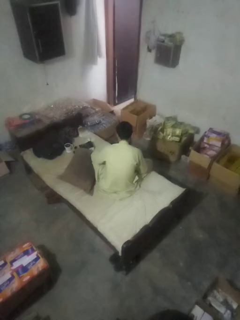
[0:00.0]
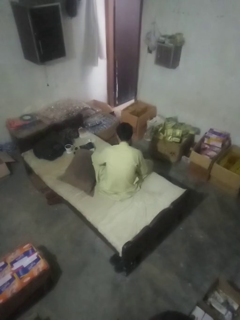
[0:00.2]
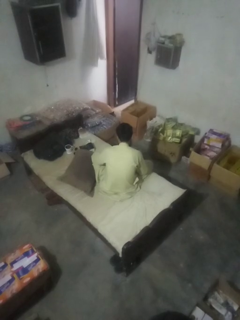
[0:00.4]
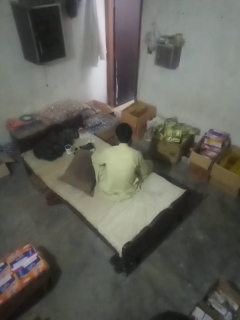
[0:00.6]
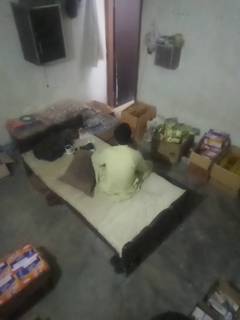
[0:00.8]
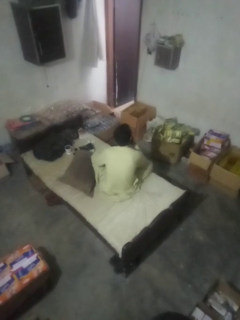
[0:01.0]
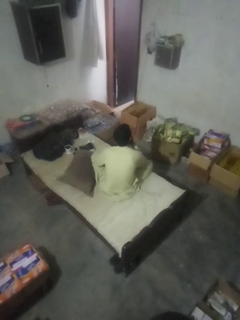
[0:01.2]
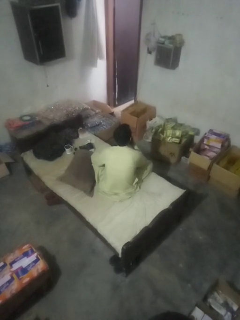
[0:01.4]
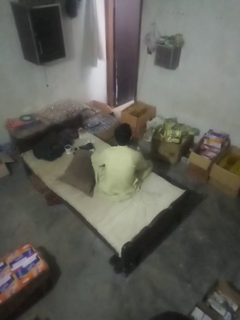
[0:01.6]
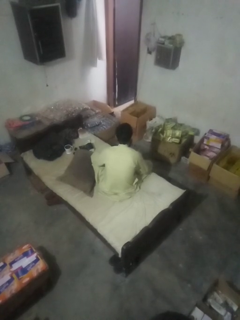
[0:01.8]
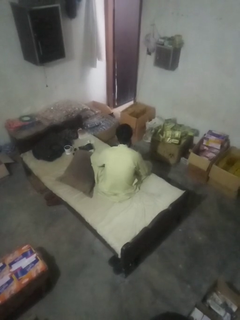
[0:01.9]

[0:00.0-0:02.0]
person gestures be quiet

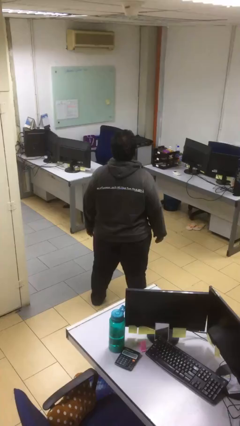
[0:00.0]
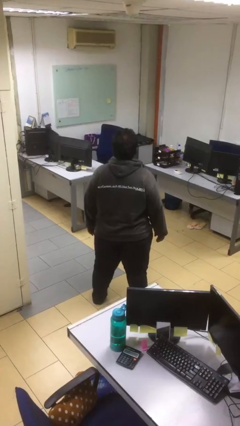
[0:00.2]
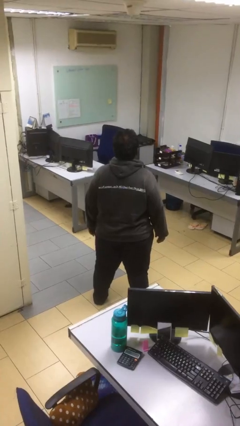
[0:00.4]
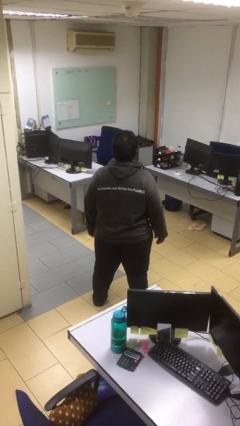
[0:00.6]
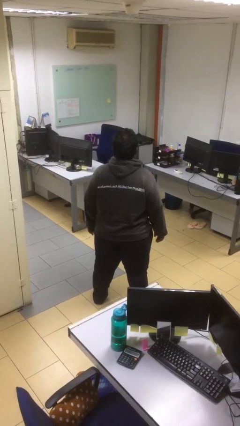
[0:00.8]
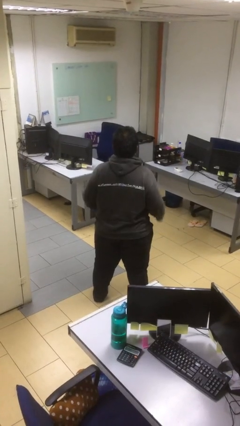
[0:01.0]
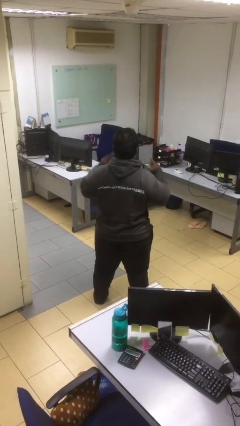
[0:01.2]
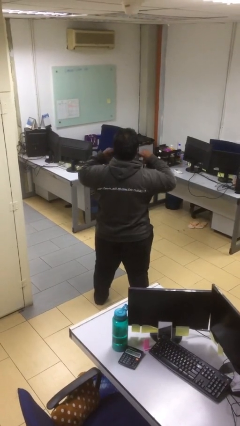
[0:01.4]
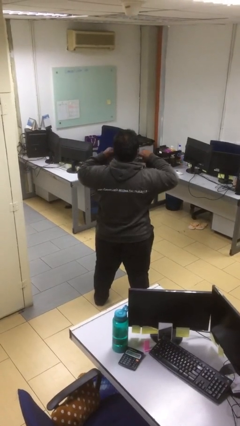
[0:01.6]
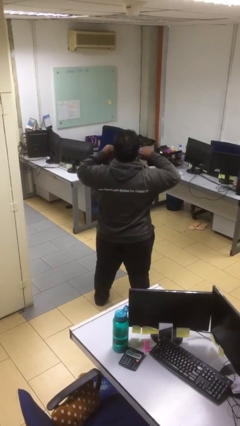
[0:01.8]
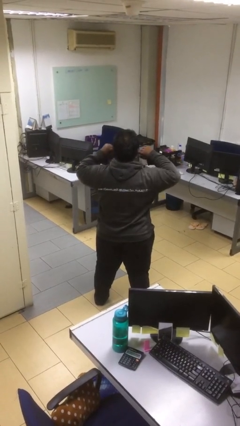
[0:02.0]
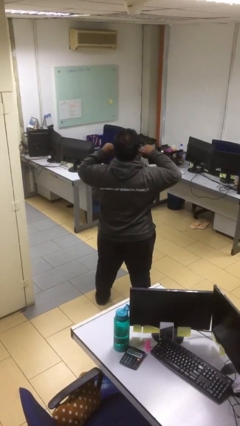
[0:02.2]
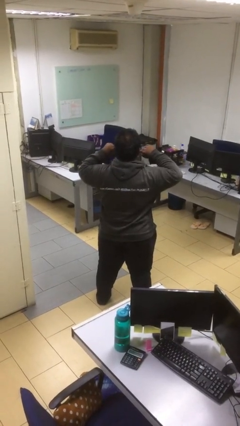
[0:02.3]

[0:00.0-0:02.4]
person puts fingers in ear

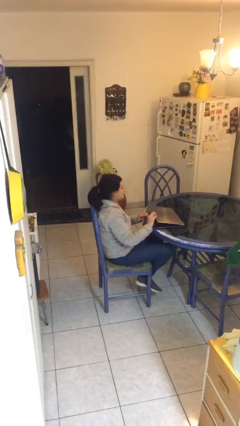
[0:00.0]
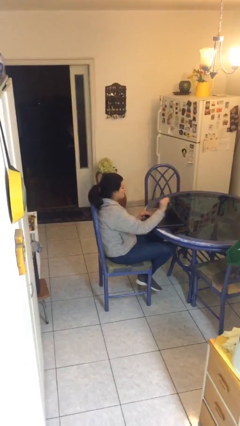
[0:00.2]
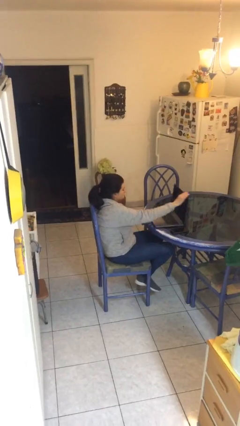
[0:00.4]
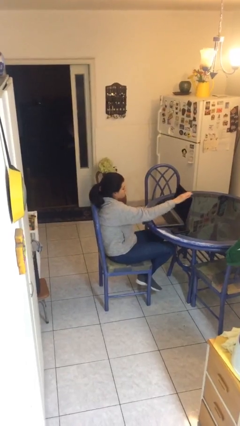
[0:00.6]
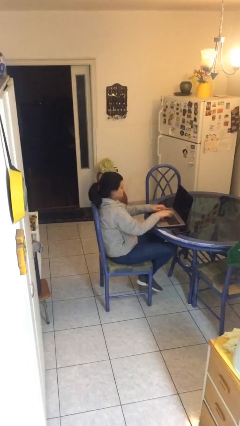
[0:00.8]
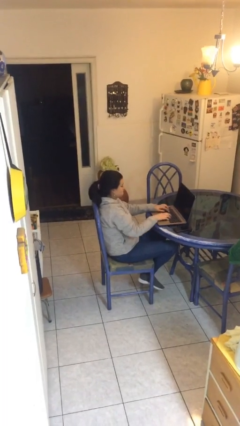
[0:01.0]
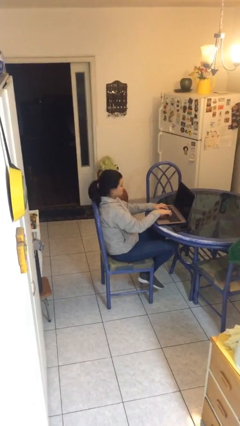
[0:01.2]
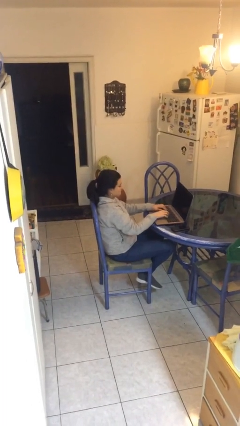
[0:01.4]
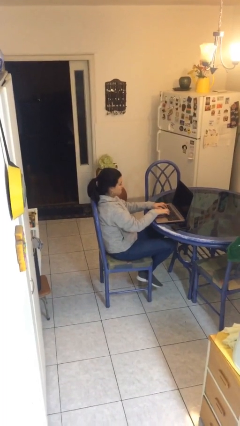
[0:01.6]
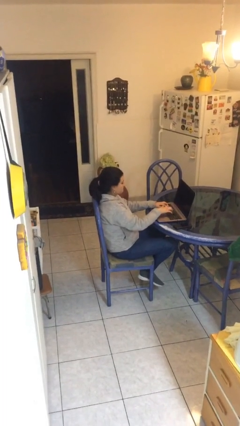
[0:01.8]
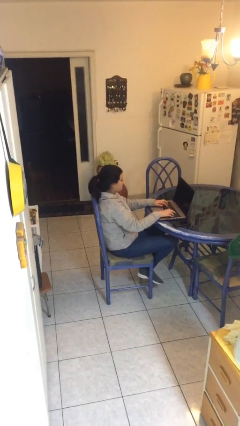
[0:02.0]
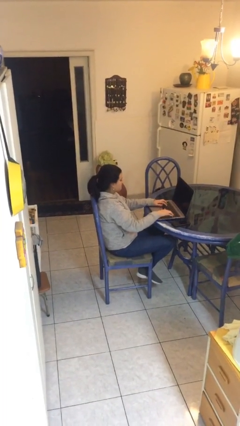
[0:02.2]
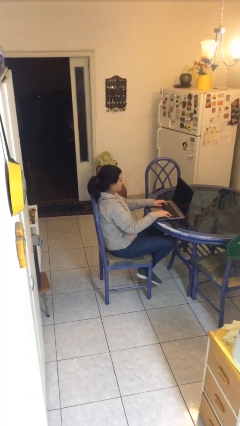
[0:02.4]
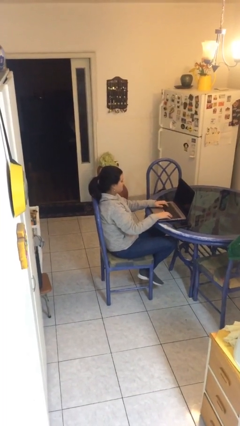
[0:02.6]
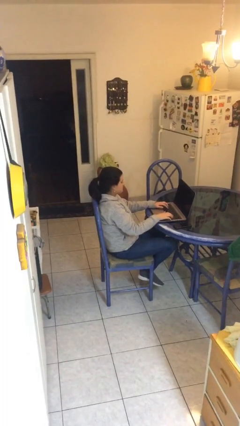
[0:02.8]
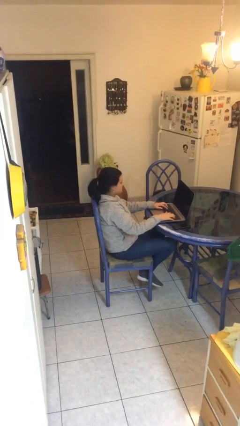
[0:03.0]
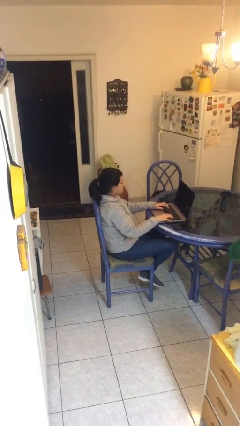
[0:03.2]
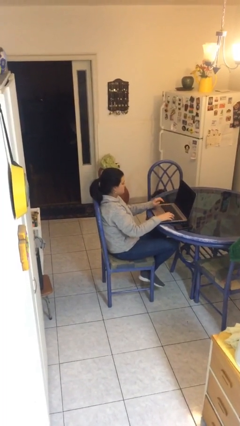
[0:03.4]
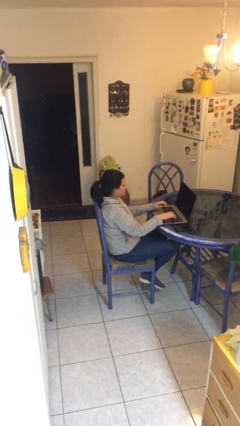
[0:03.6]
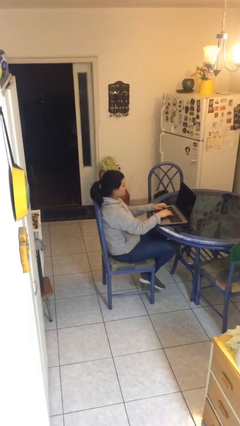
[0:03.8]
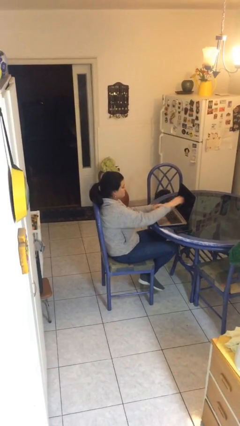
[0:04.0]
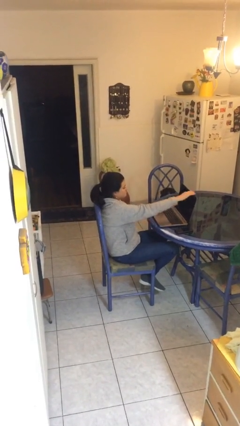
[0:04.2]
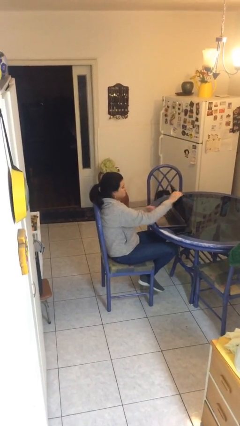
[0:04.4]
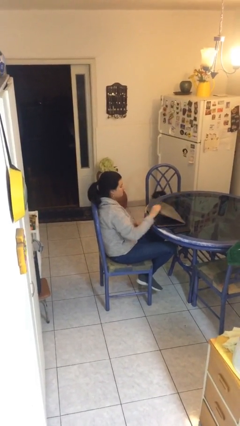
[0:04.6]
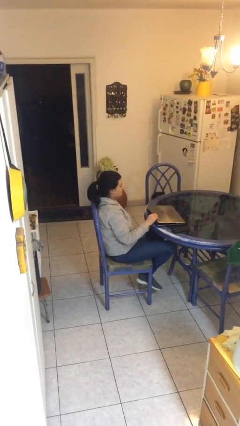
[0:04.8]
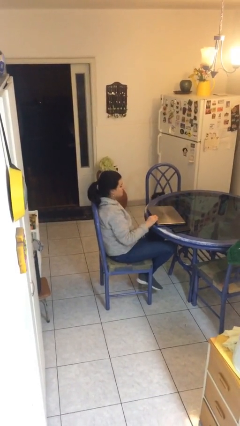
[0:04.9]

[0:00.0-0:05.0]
person interacts with laptop

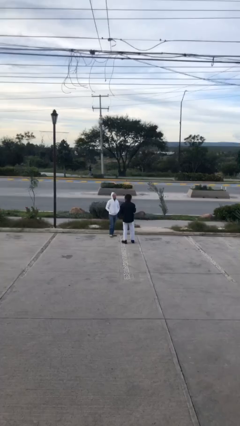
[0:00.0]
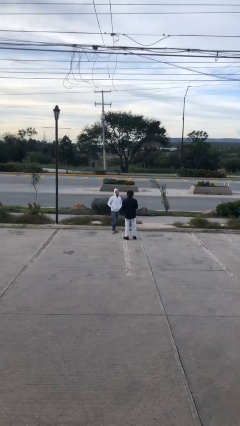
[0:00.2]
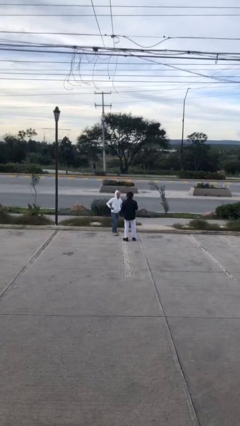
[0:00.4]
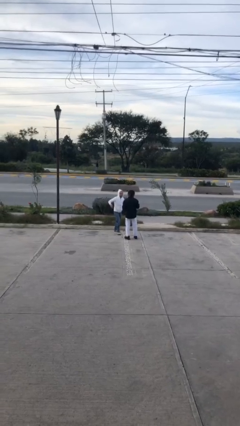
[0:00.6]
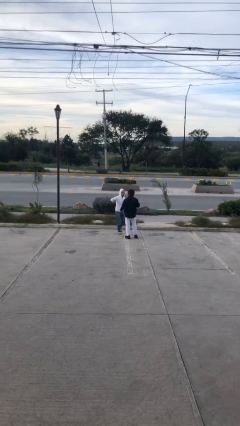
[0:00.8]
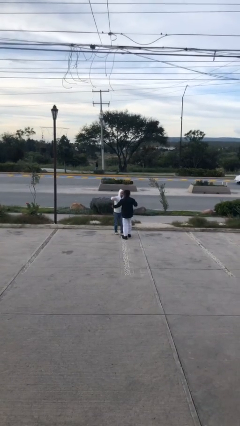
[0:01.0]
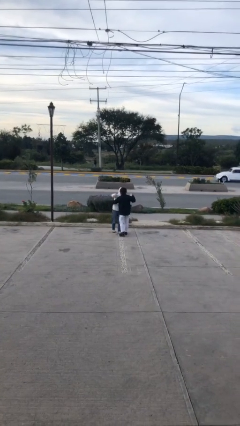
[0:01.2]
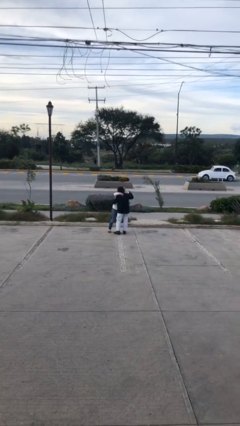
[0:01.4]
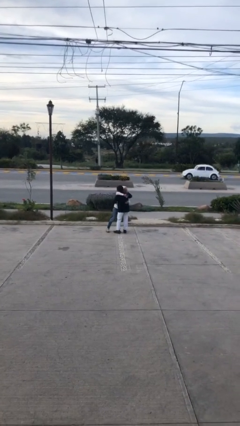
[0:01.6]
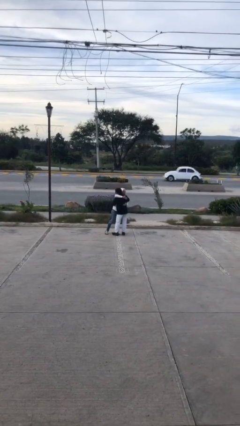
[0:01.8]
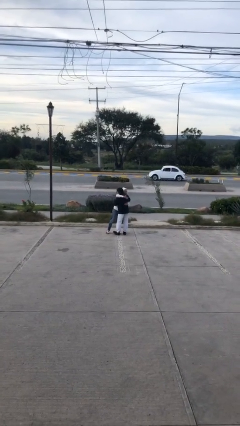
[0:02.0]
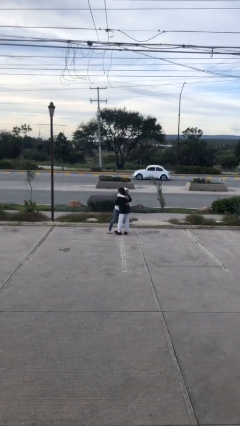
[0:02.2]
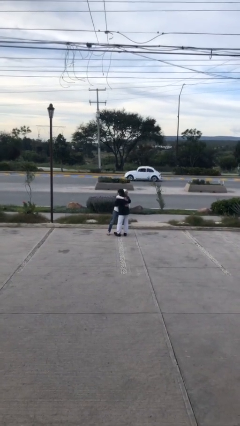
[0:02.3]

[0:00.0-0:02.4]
person embraces person

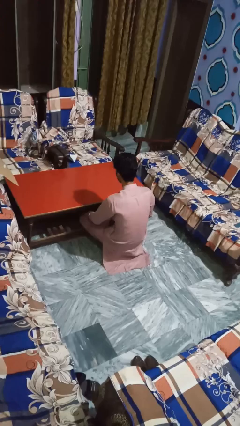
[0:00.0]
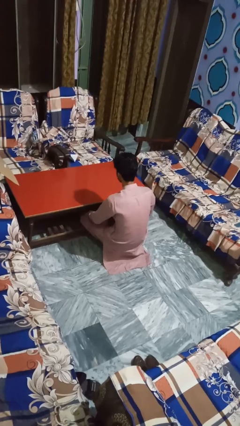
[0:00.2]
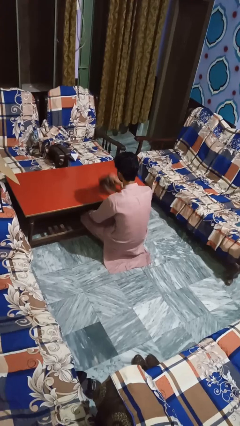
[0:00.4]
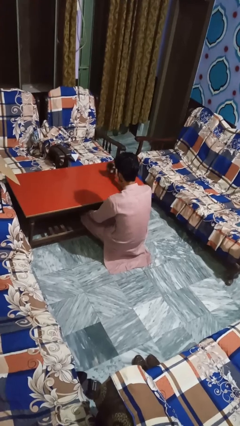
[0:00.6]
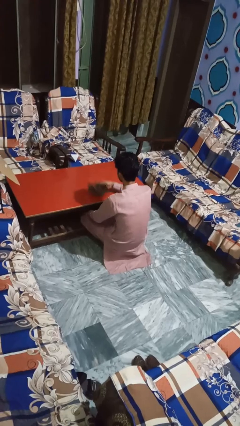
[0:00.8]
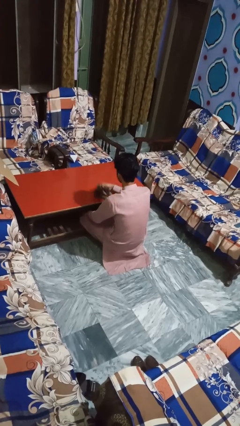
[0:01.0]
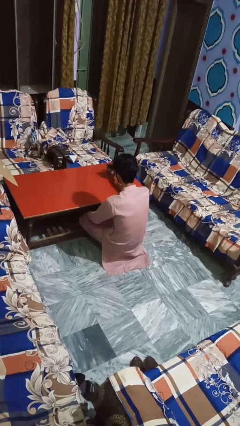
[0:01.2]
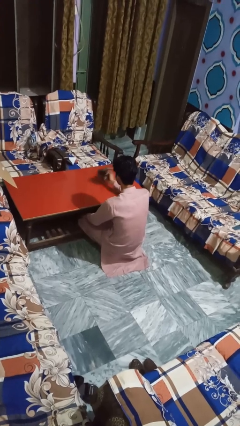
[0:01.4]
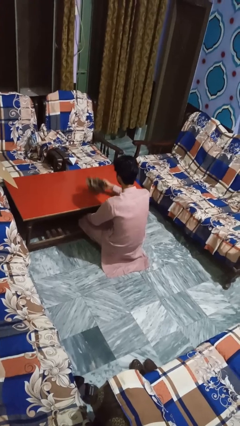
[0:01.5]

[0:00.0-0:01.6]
person cleans table with rag

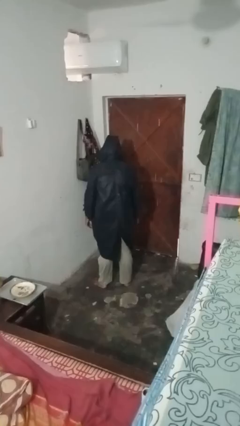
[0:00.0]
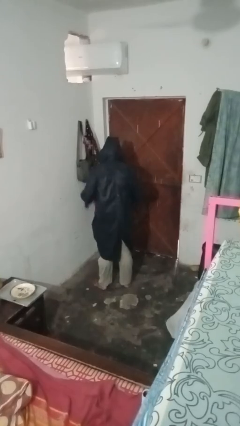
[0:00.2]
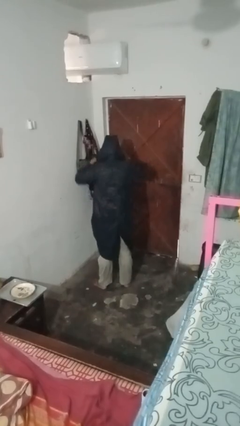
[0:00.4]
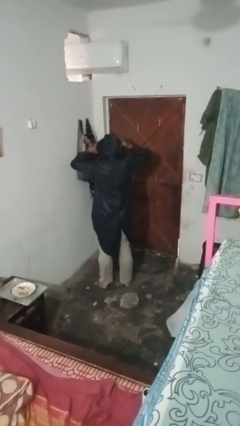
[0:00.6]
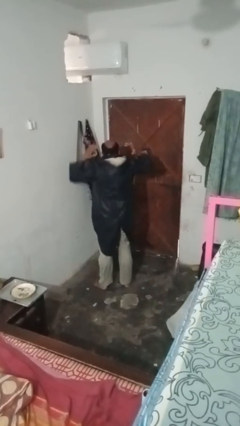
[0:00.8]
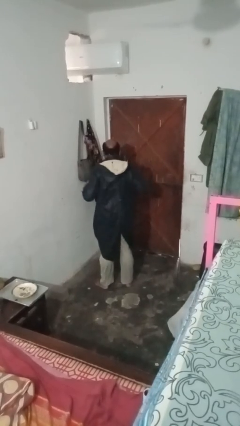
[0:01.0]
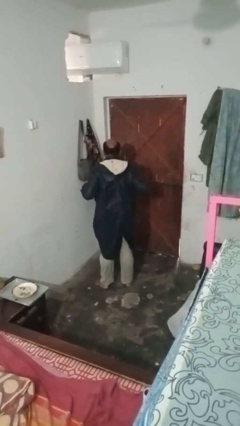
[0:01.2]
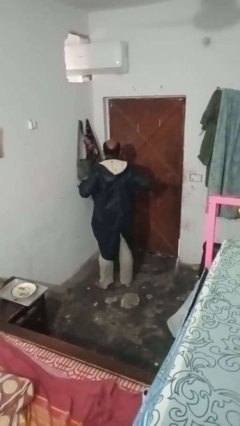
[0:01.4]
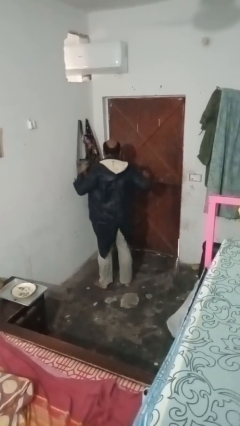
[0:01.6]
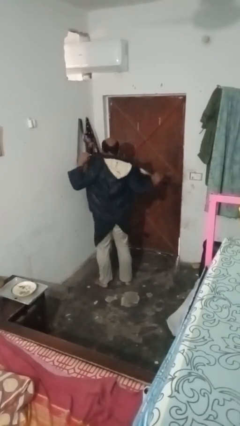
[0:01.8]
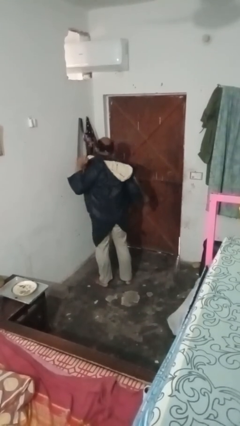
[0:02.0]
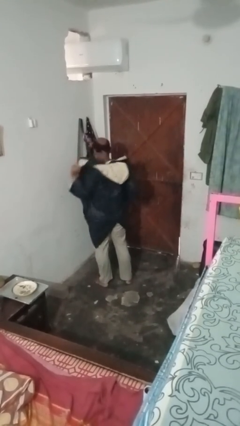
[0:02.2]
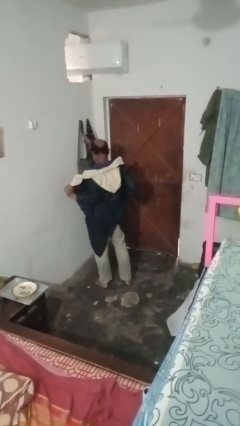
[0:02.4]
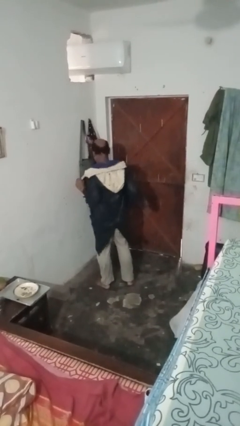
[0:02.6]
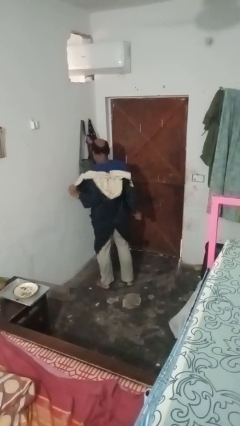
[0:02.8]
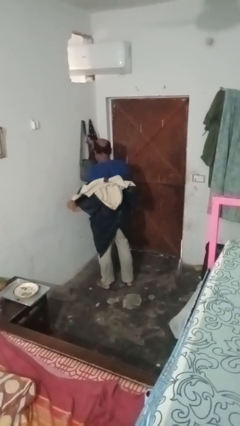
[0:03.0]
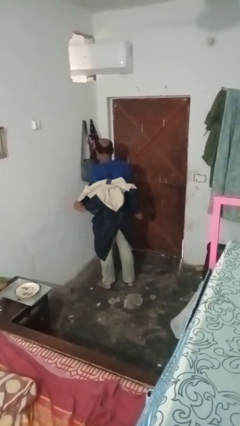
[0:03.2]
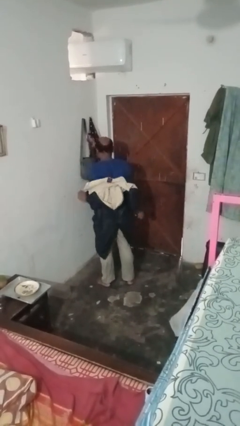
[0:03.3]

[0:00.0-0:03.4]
person takes off hoodie

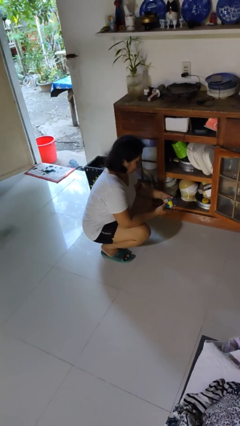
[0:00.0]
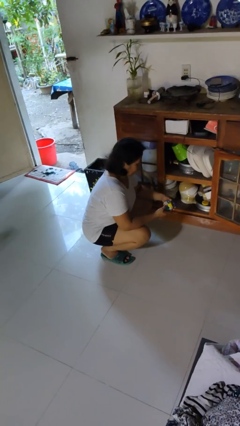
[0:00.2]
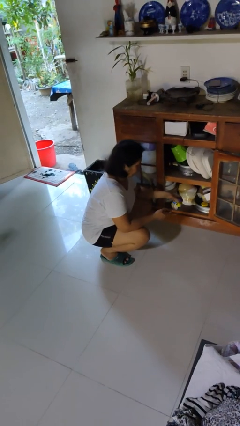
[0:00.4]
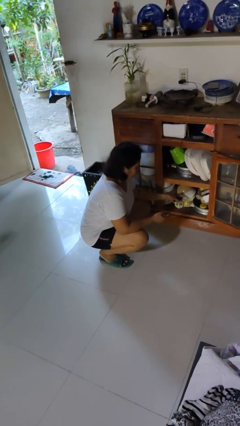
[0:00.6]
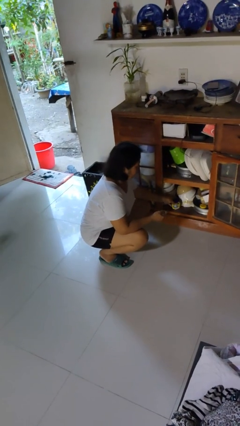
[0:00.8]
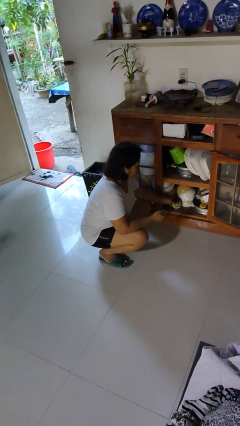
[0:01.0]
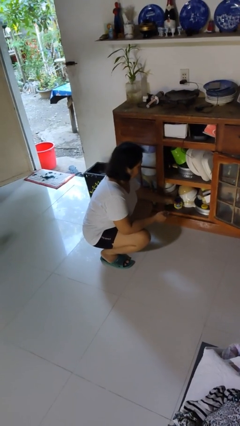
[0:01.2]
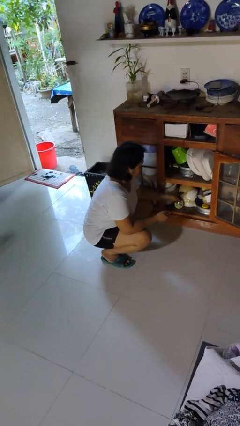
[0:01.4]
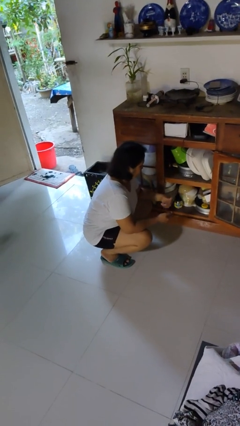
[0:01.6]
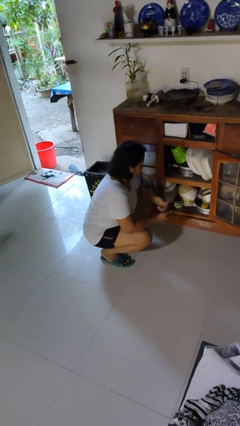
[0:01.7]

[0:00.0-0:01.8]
person puts down object into cabinet
